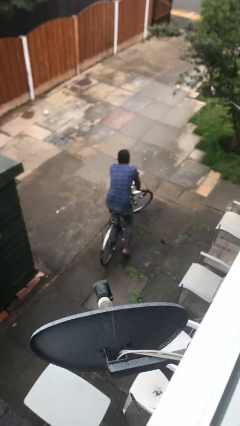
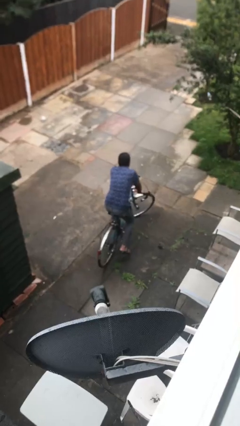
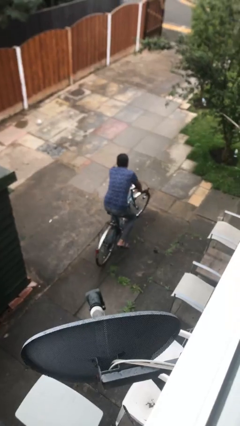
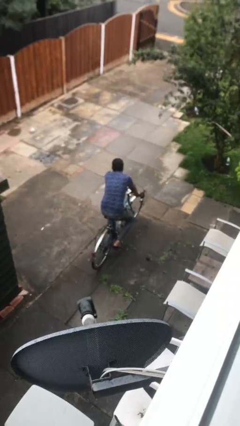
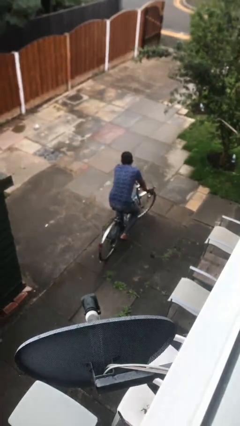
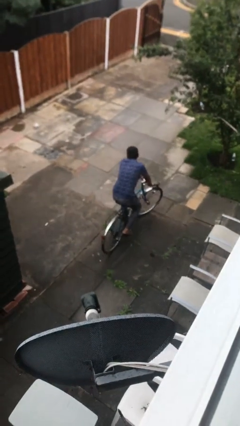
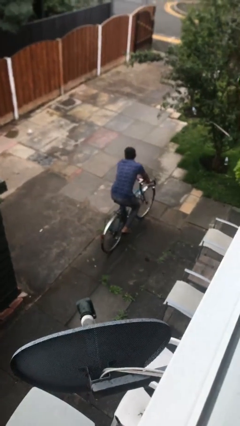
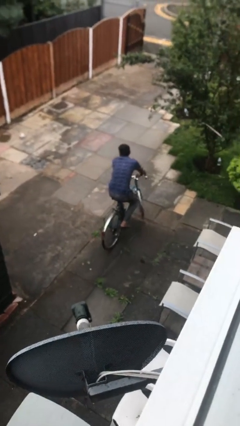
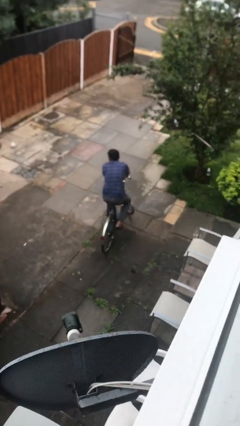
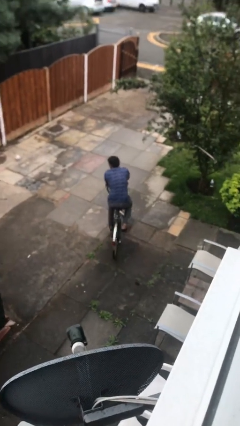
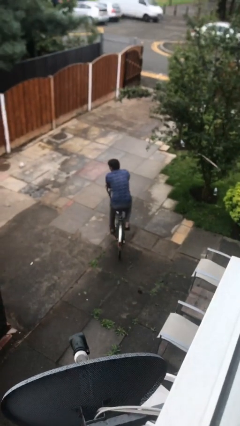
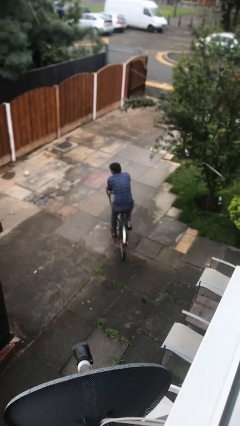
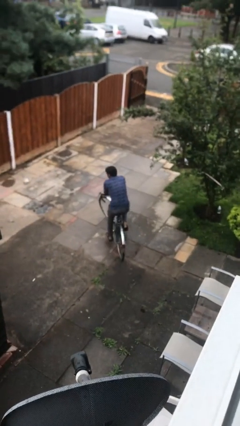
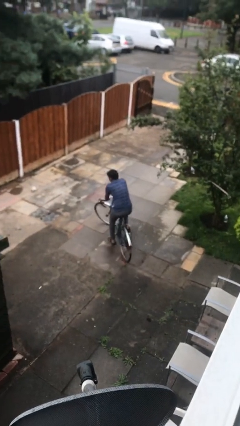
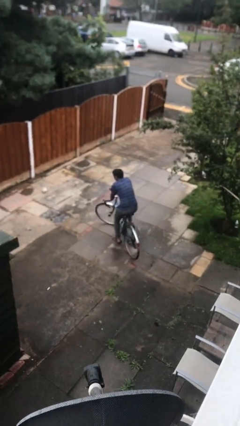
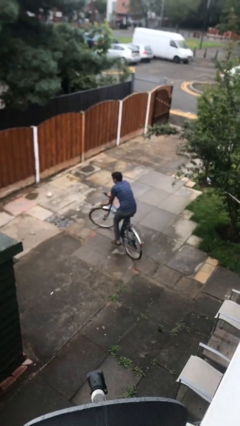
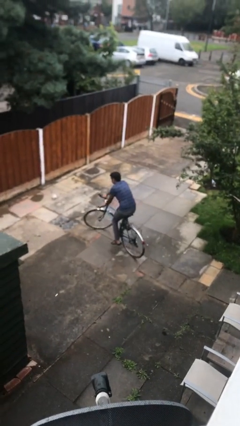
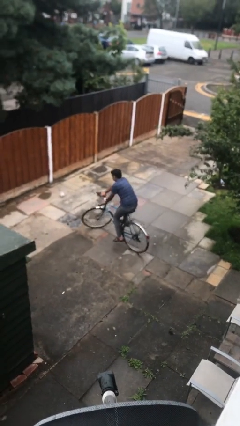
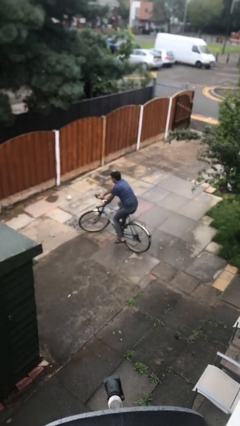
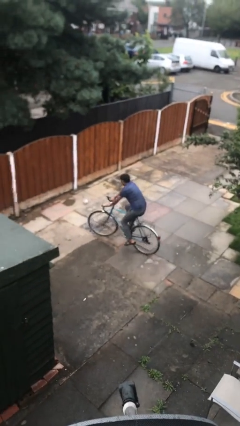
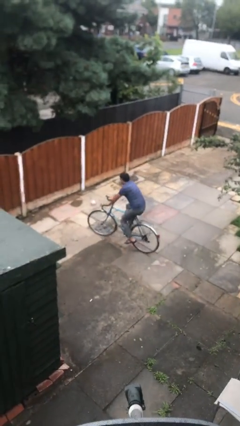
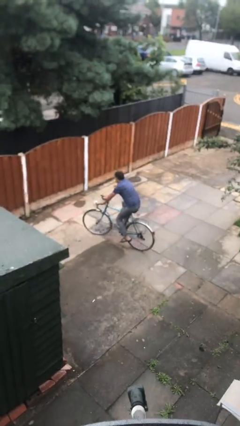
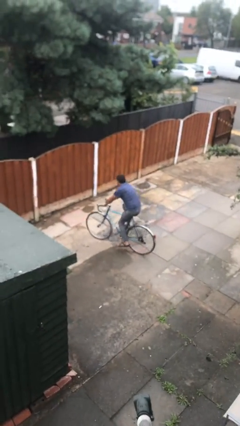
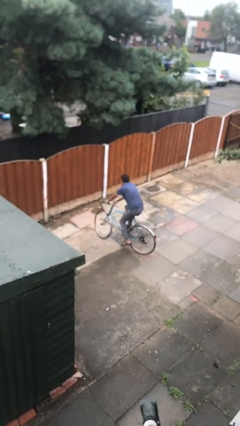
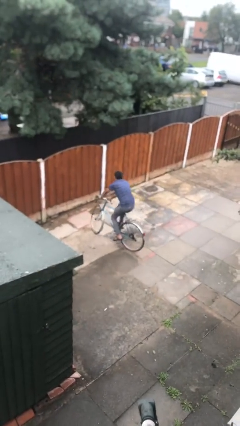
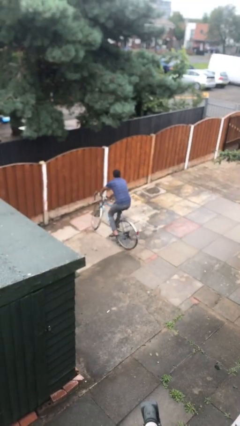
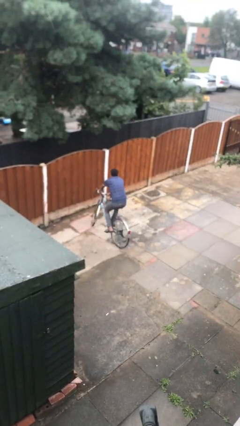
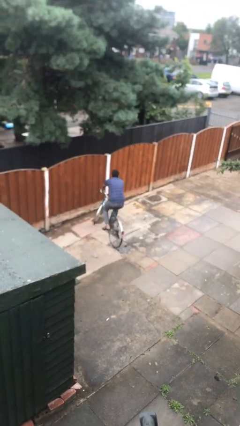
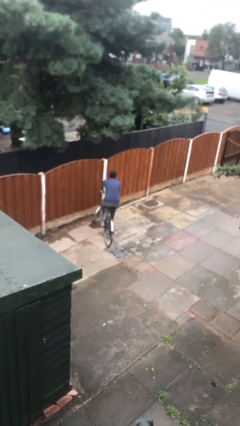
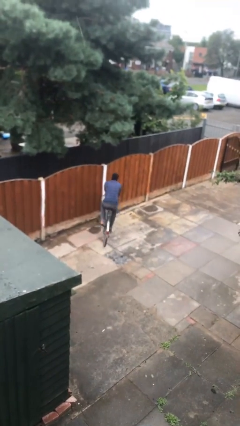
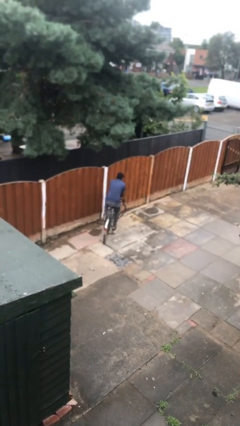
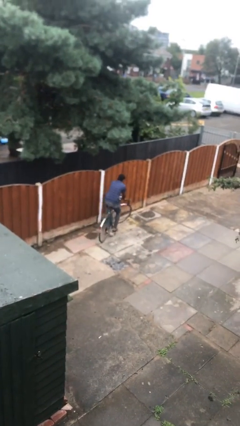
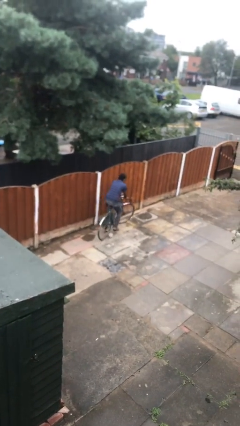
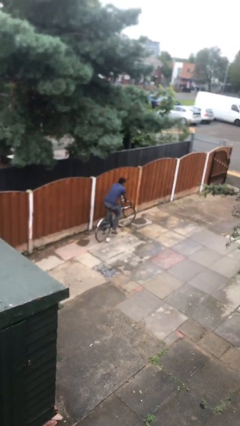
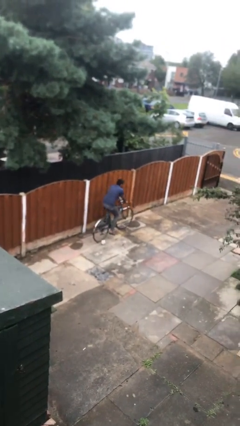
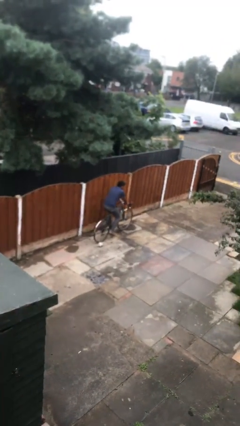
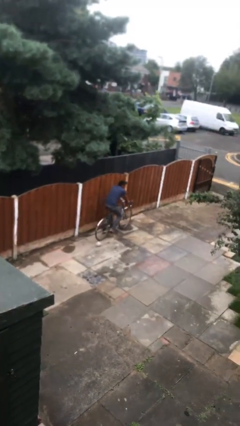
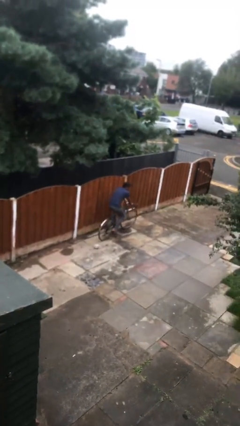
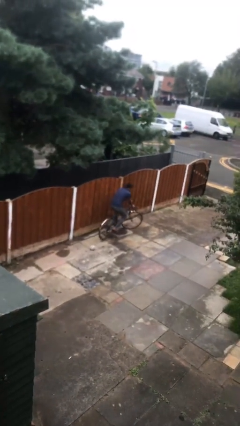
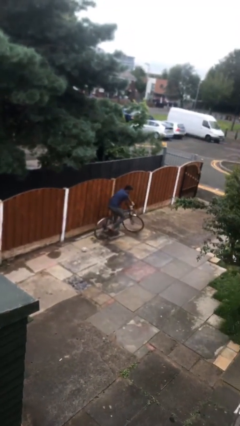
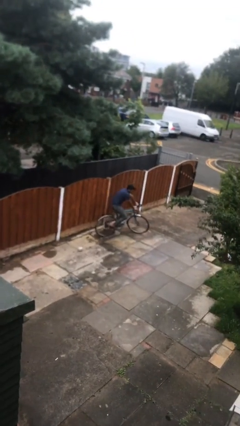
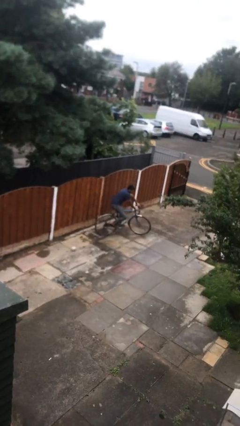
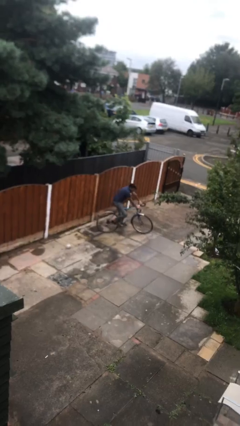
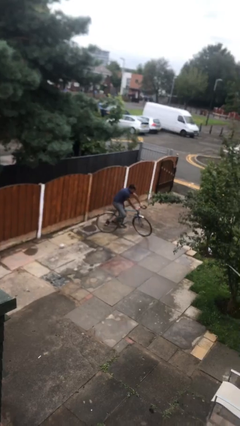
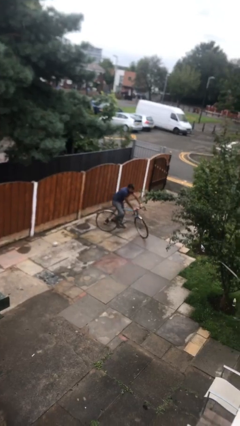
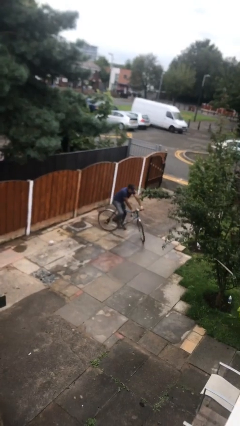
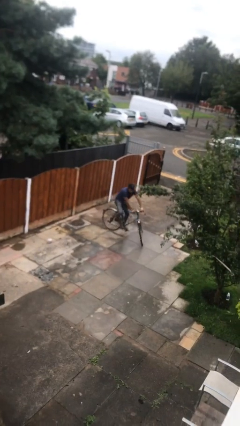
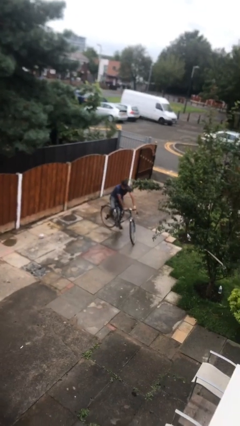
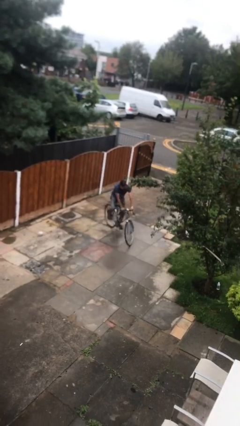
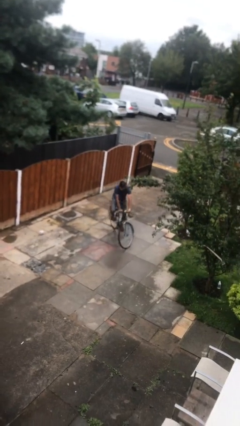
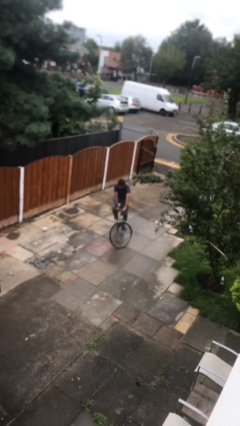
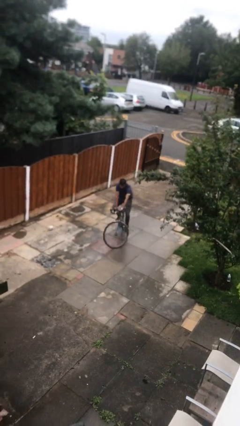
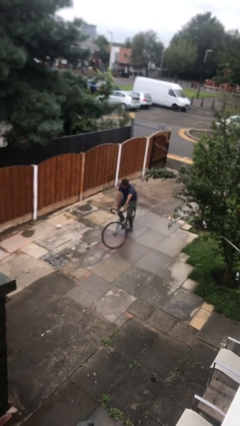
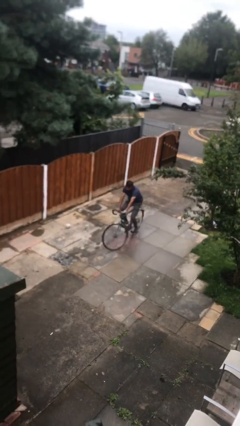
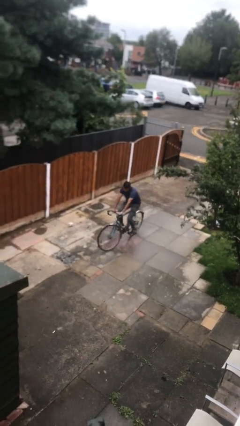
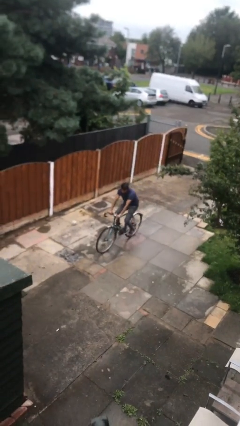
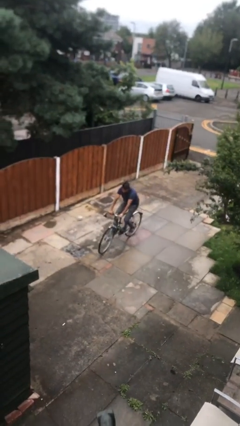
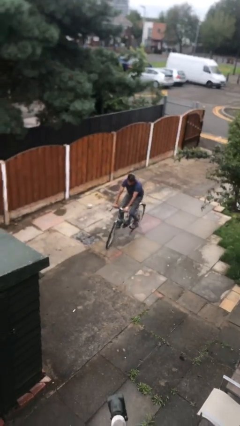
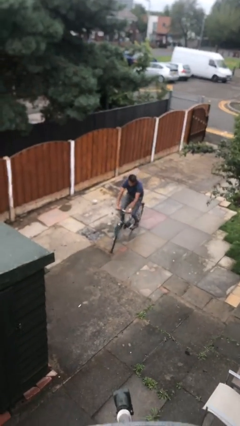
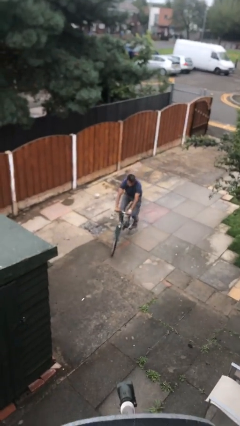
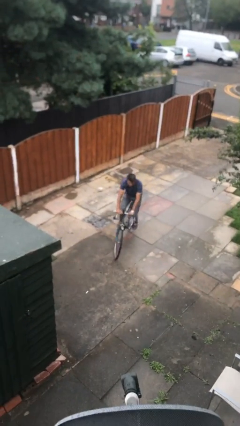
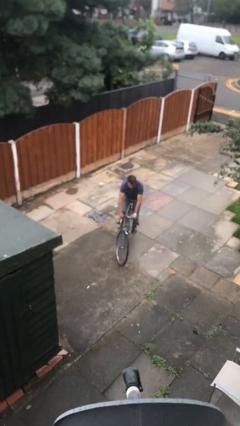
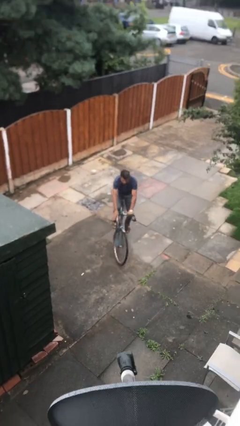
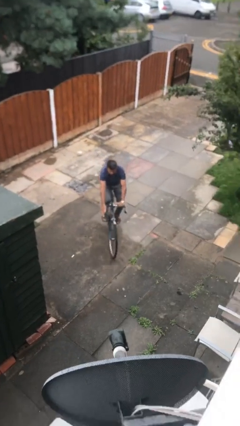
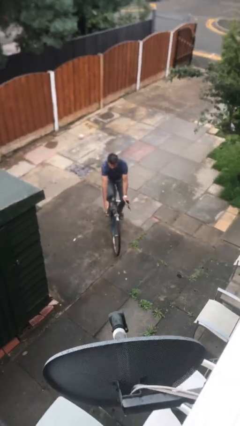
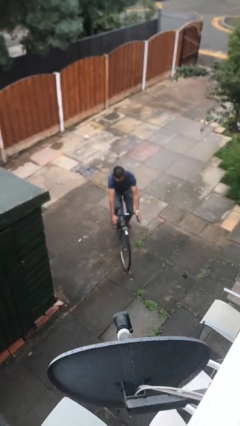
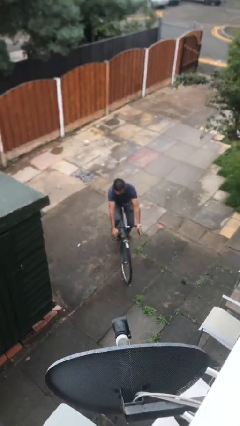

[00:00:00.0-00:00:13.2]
person rides bicycle

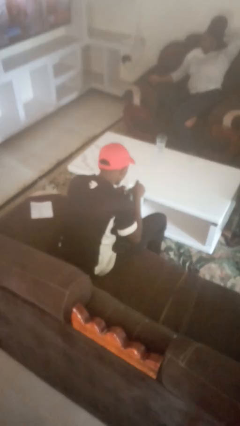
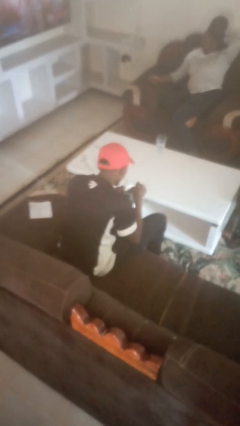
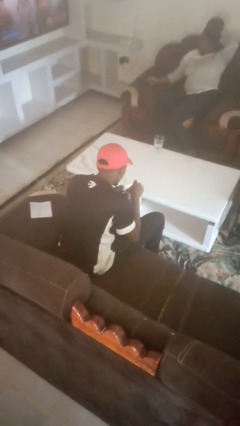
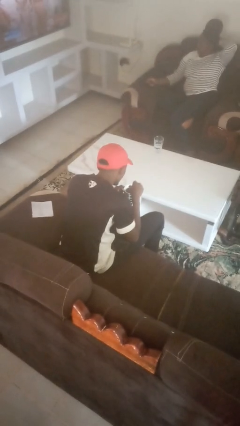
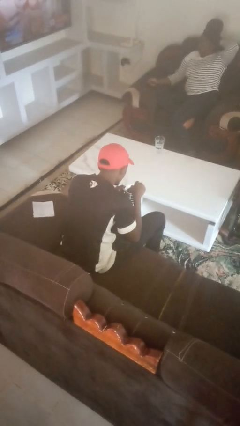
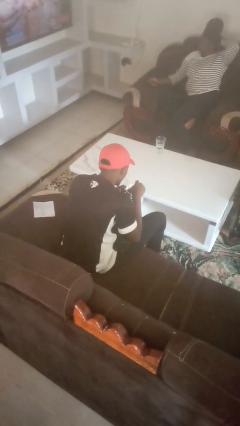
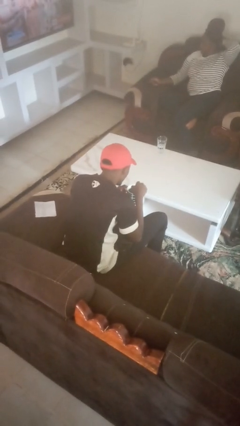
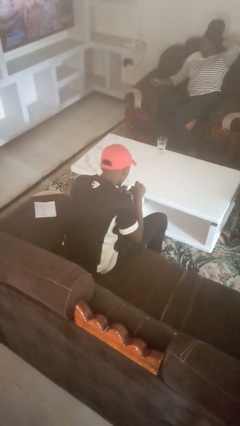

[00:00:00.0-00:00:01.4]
person stirs mug

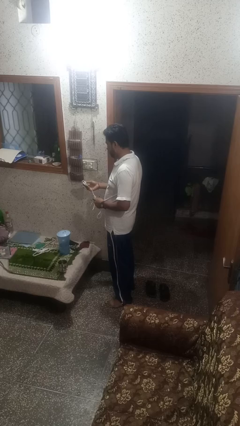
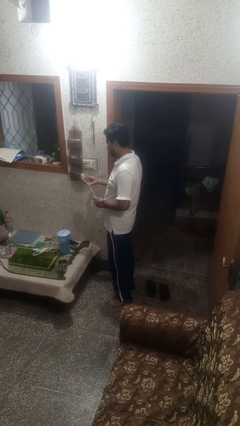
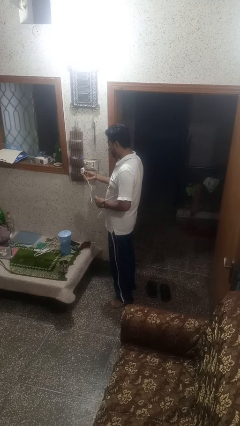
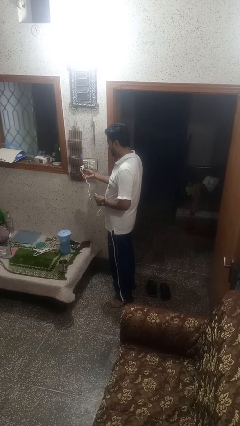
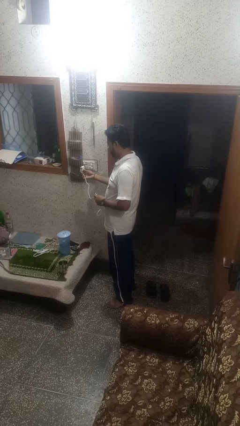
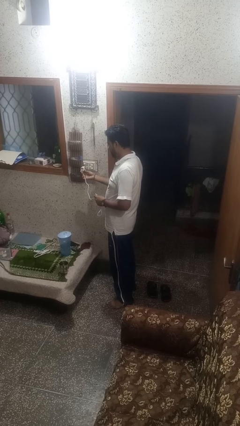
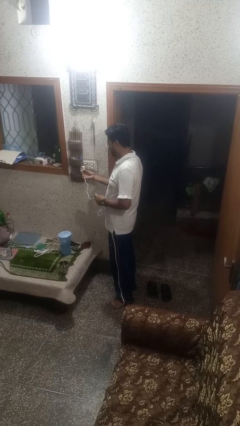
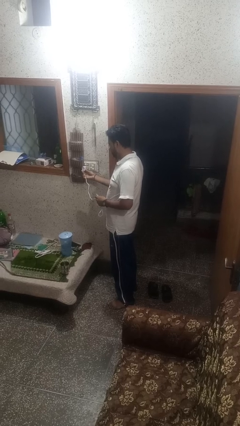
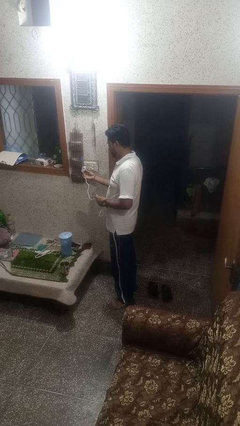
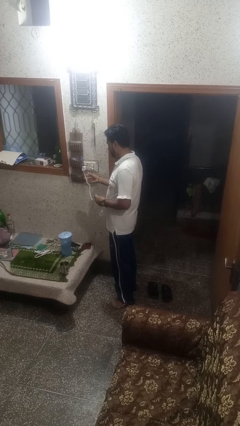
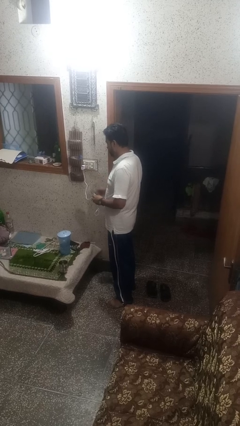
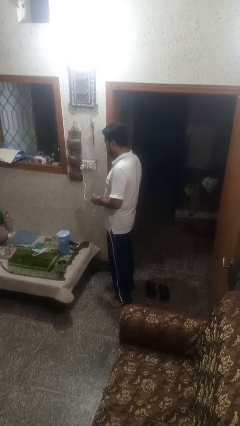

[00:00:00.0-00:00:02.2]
person plugs into electrical socket

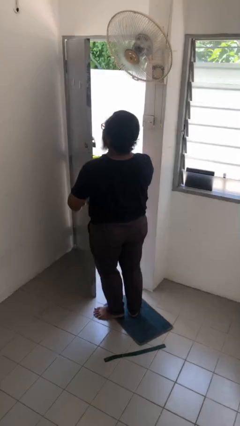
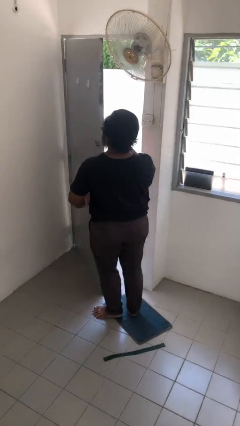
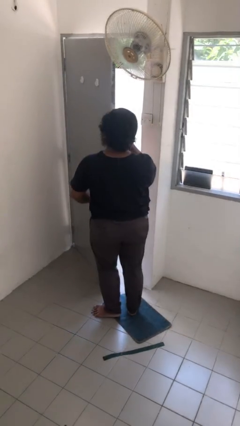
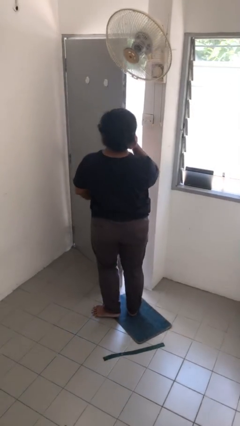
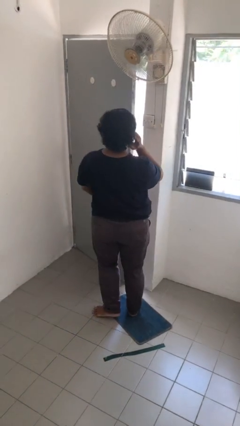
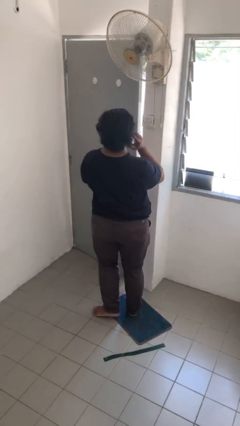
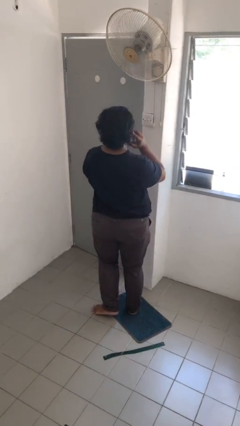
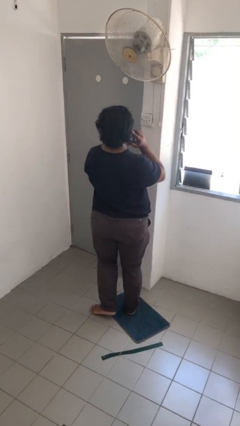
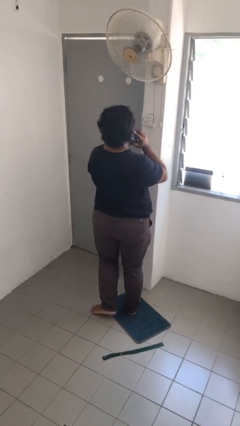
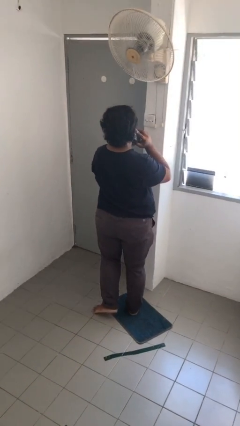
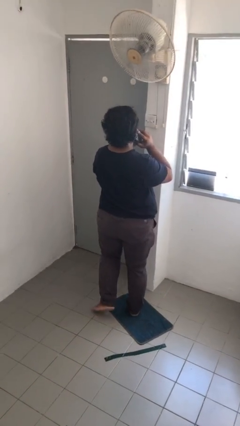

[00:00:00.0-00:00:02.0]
person closes facility door
